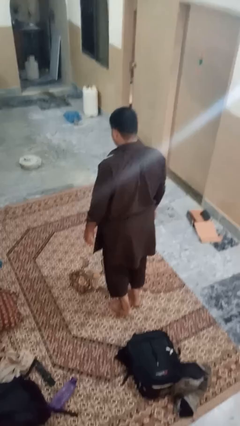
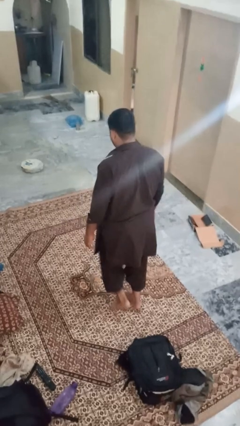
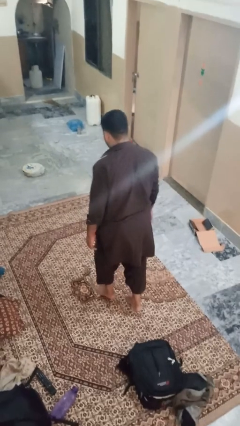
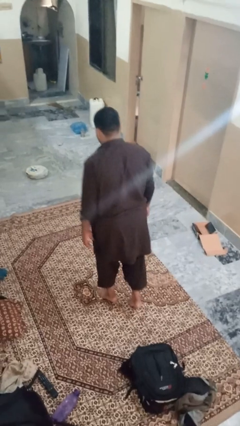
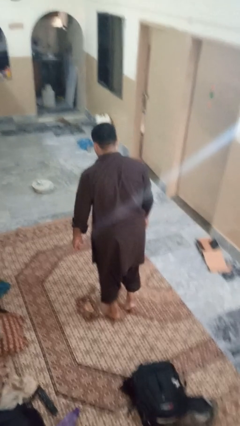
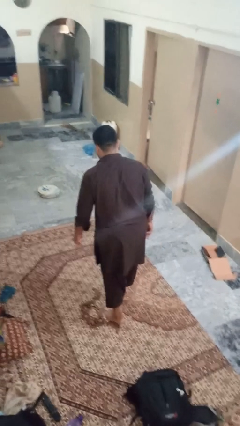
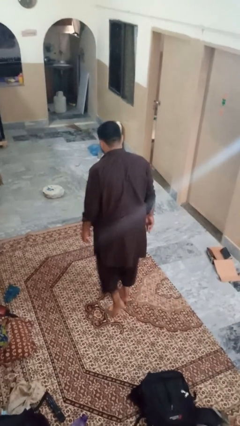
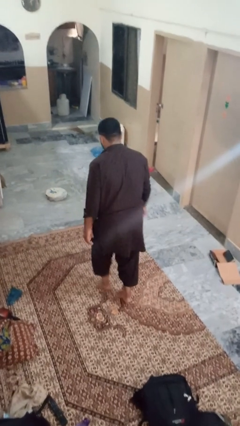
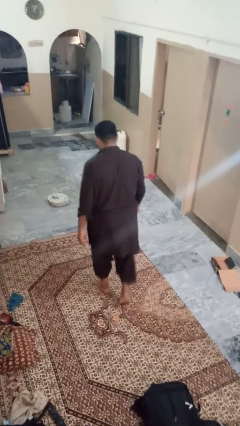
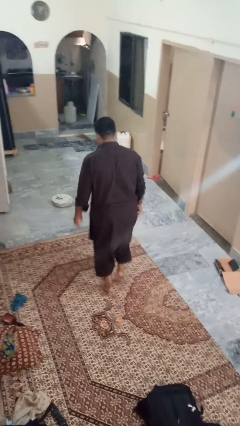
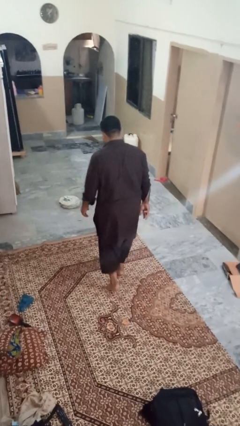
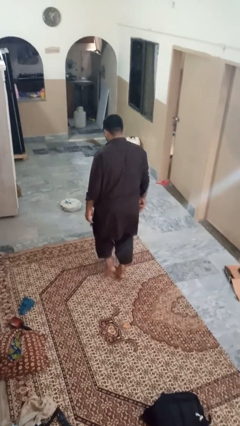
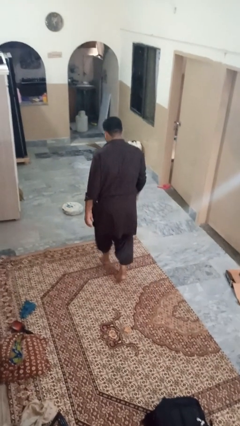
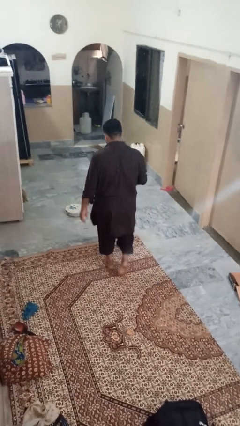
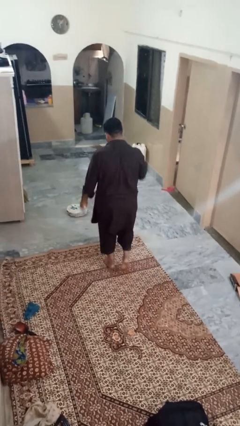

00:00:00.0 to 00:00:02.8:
person walks tiptoe

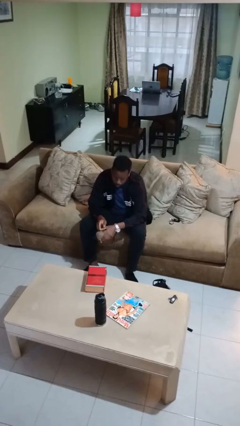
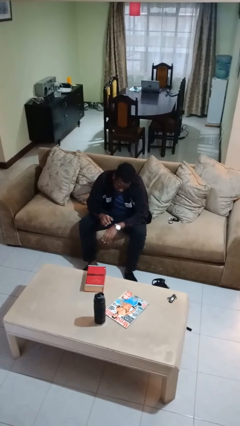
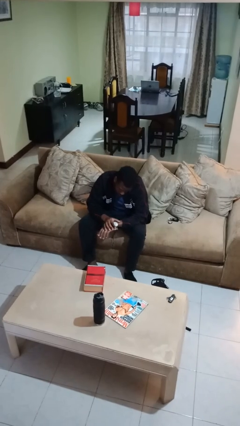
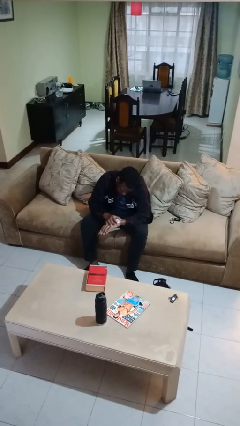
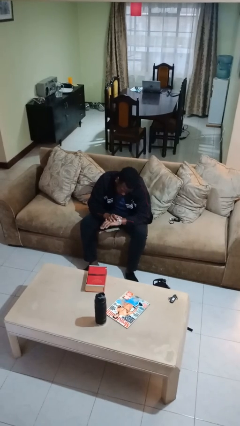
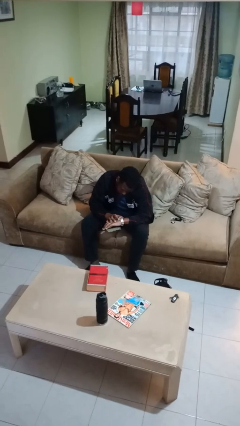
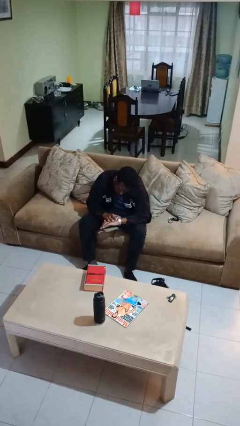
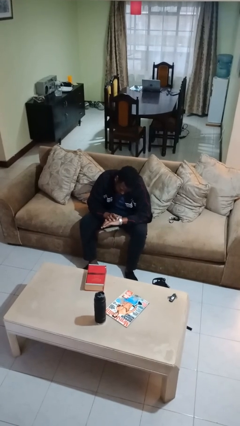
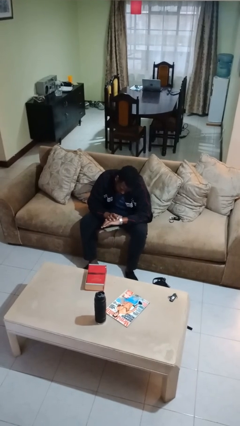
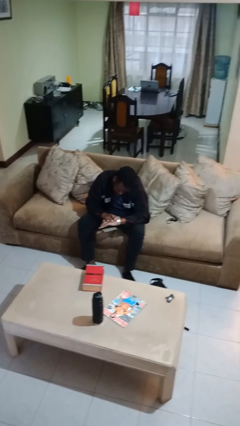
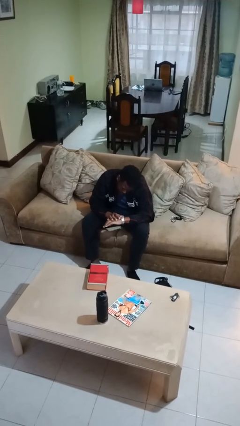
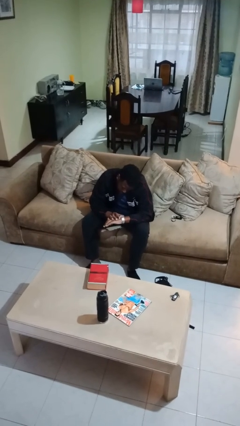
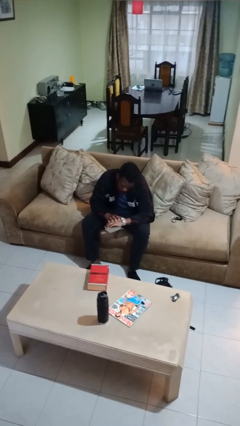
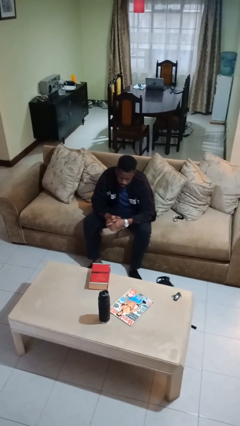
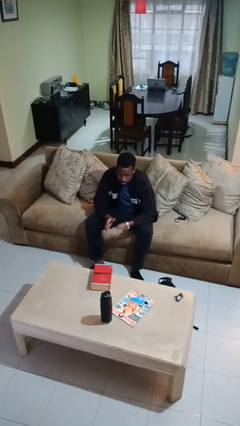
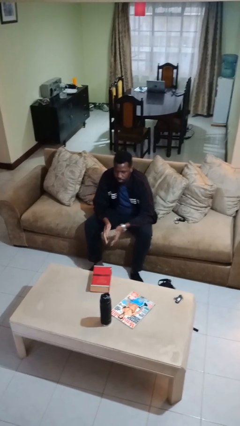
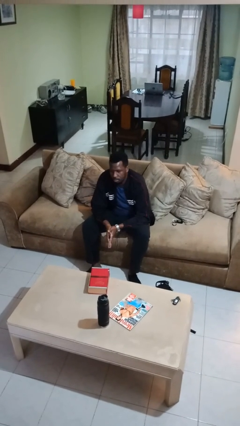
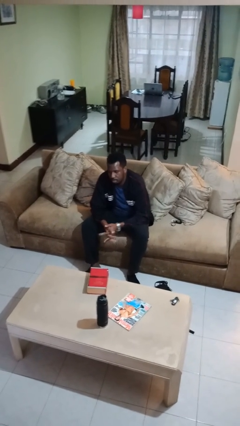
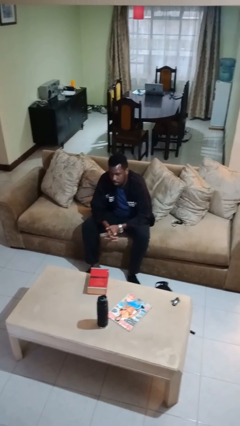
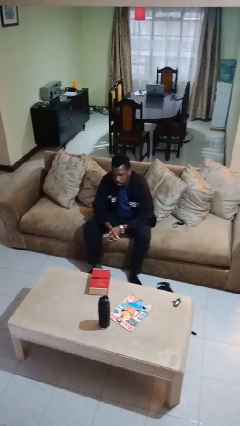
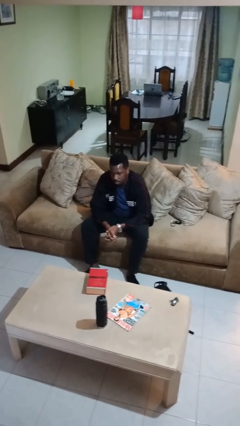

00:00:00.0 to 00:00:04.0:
person looks at wristwatch

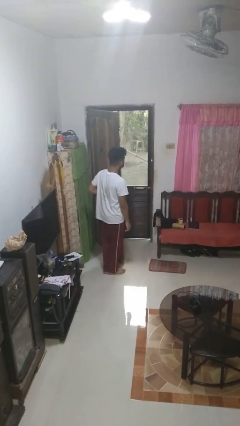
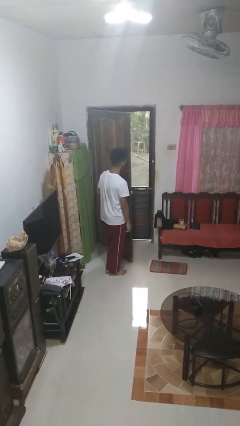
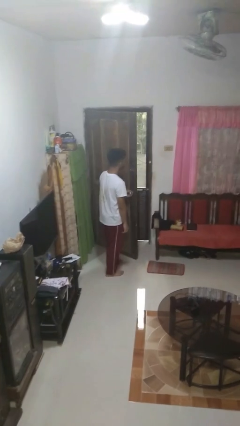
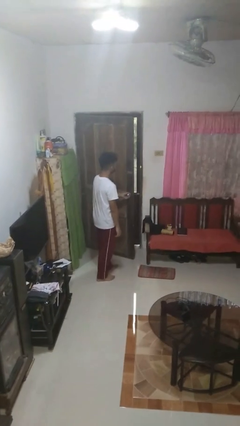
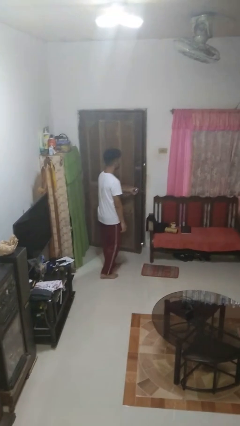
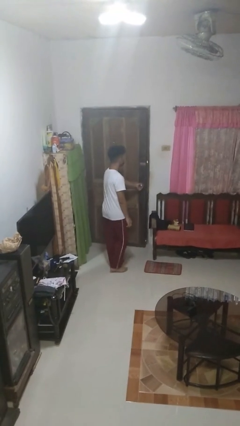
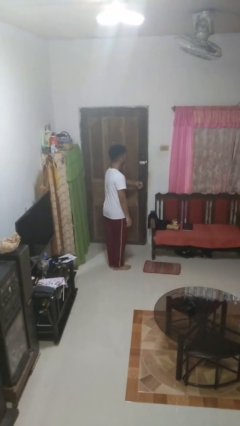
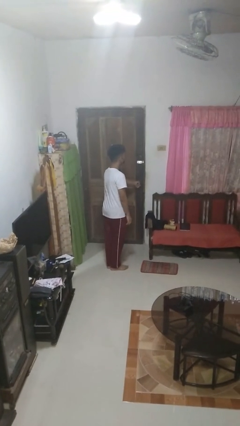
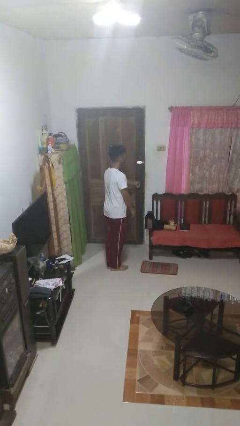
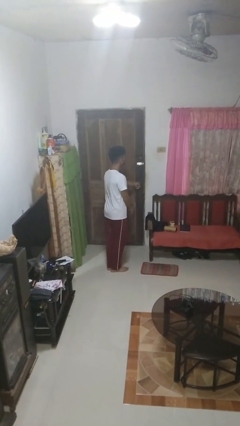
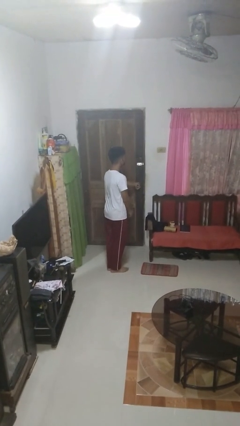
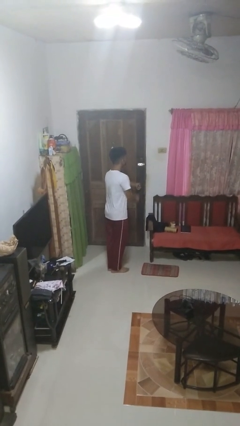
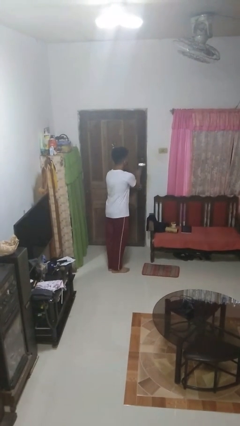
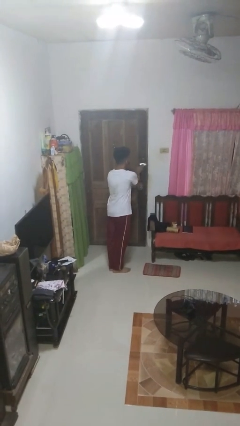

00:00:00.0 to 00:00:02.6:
person closes facility door

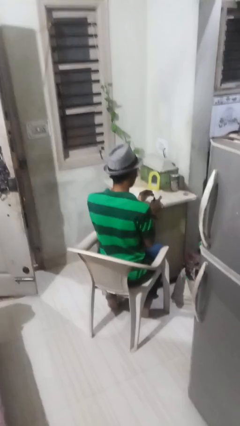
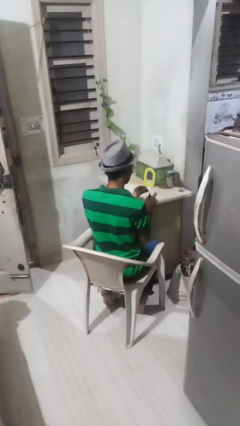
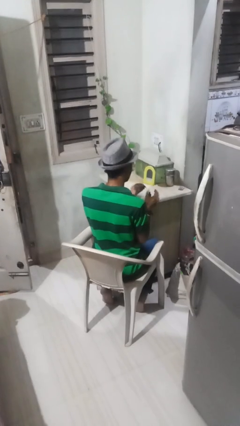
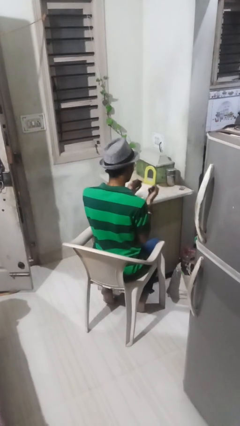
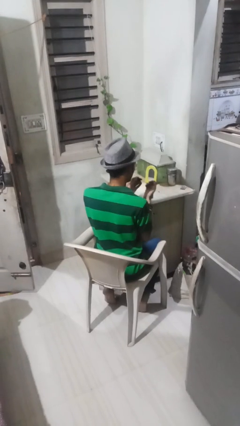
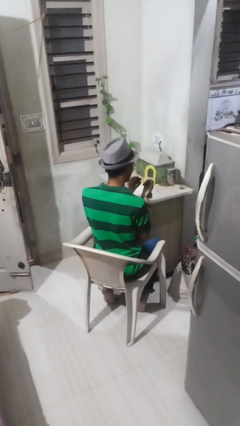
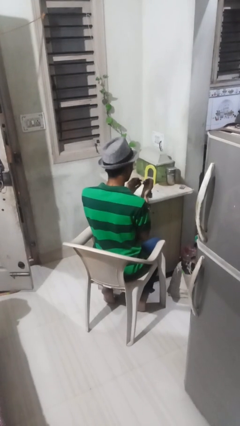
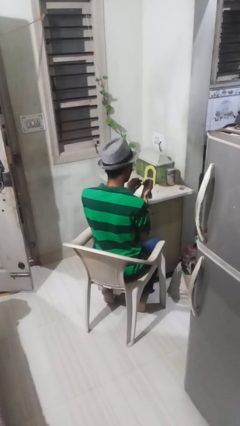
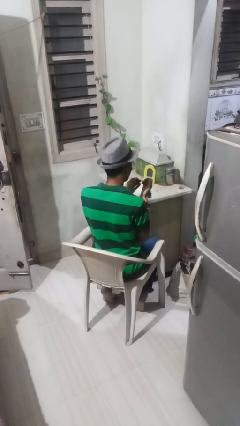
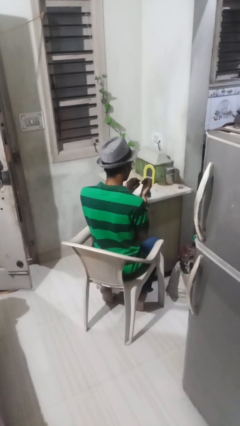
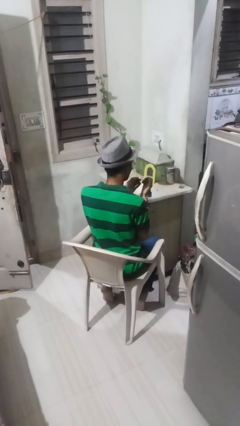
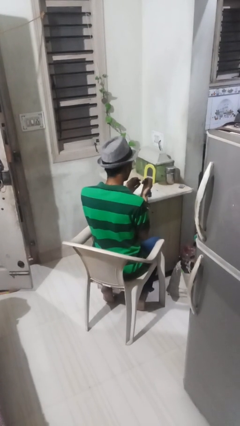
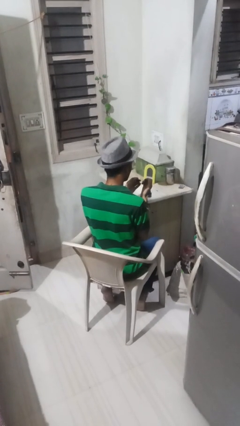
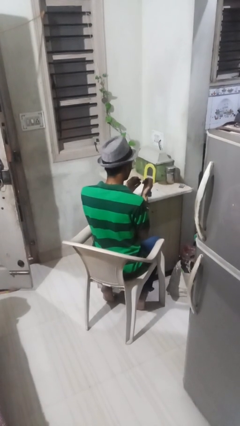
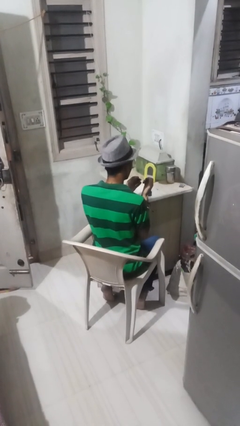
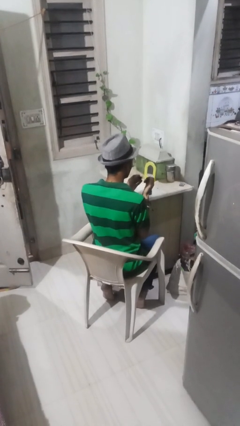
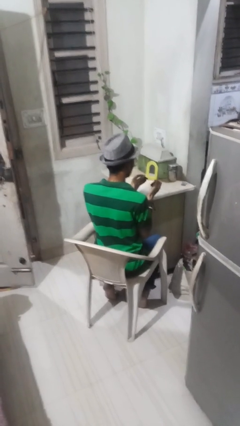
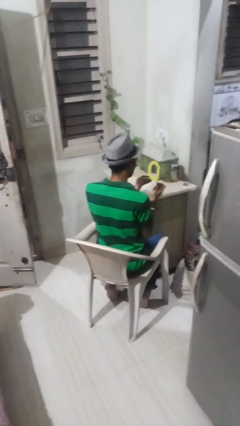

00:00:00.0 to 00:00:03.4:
person paints fingernails

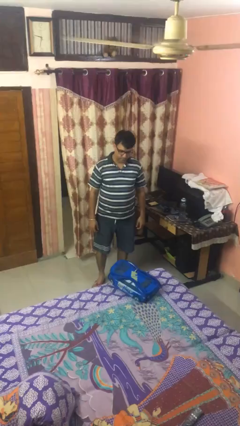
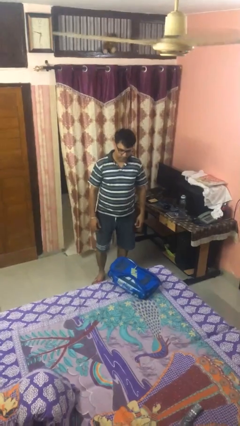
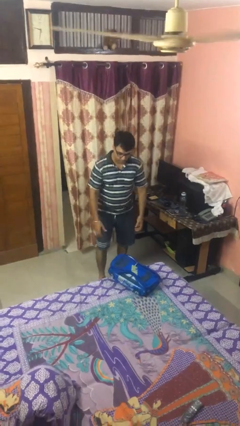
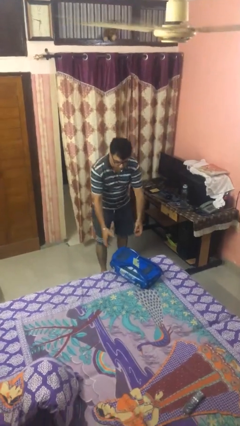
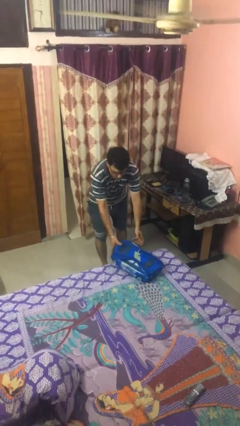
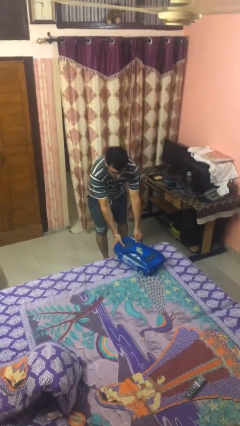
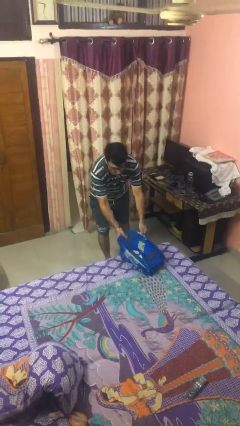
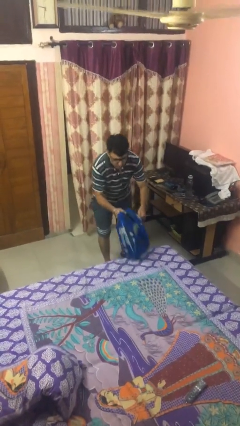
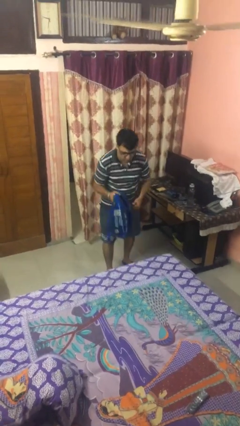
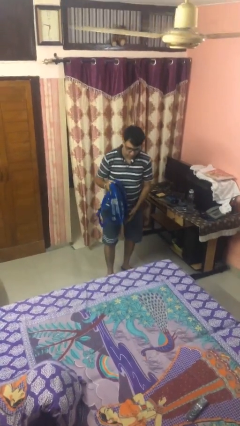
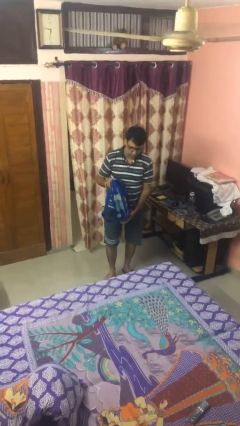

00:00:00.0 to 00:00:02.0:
person picks up object from bed

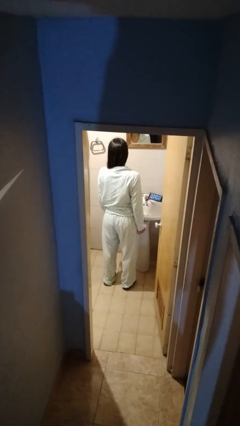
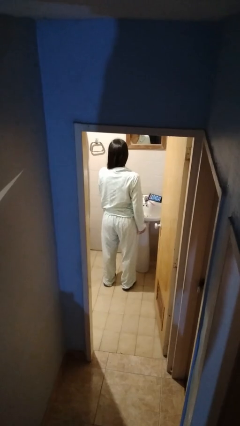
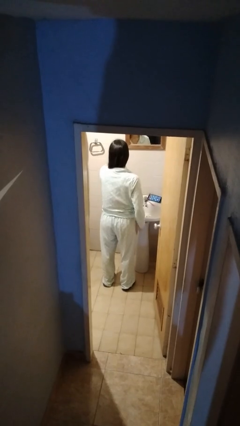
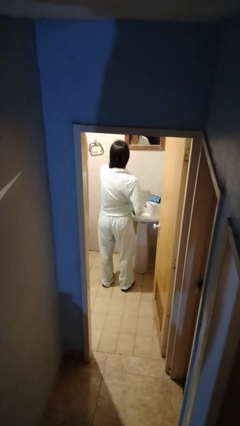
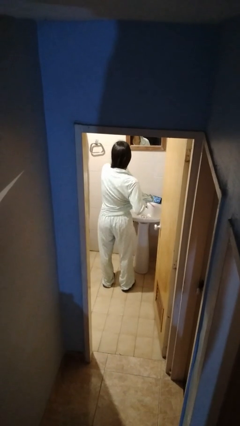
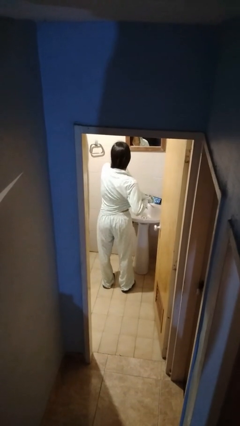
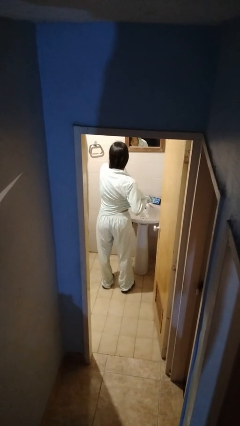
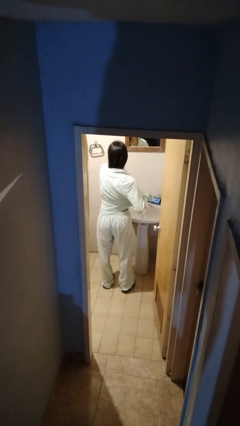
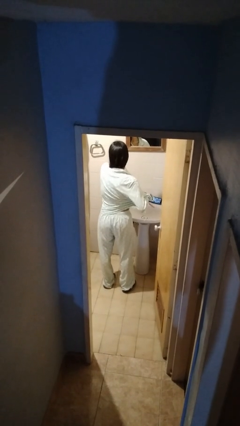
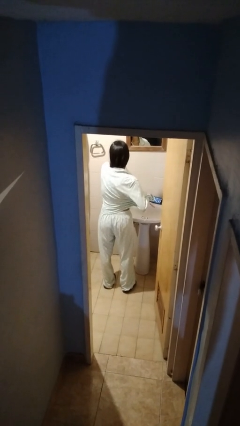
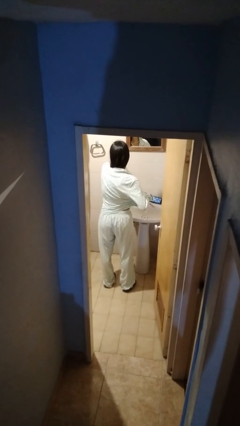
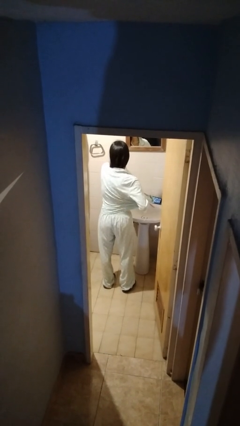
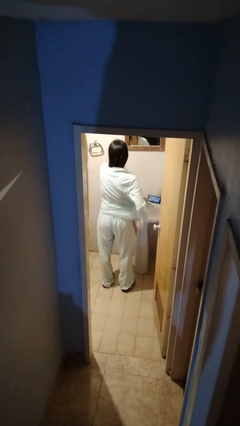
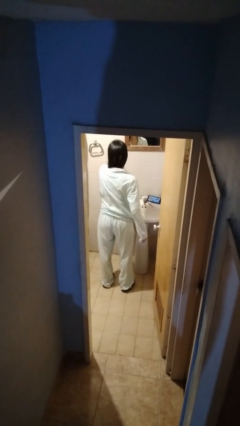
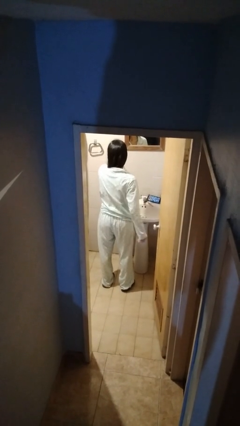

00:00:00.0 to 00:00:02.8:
person applies deodorant
